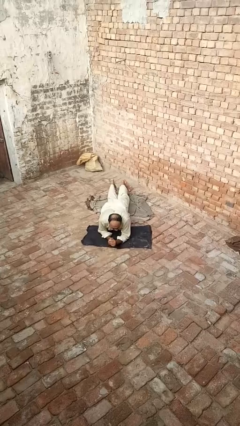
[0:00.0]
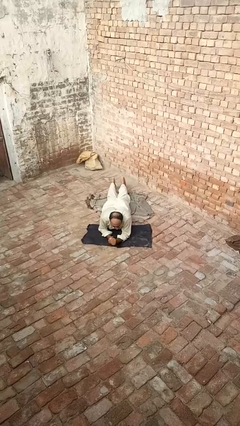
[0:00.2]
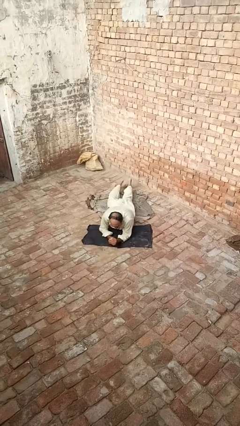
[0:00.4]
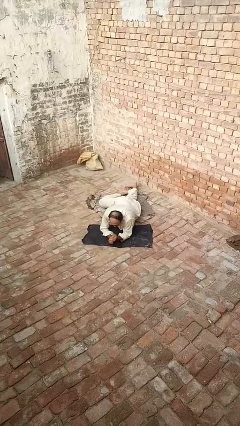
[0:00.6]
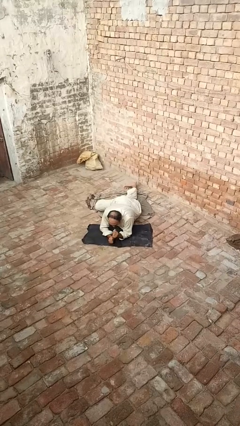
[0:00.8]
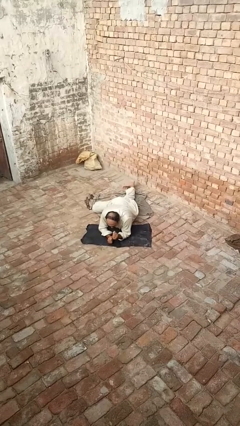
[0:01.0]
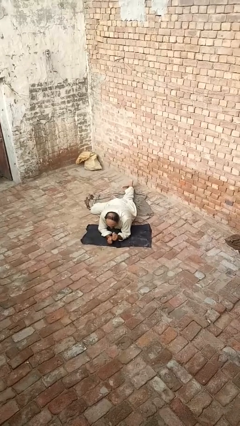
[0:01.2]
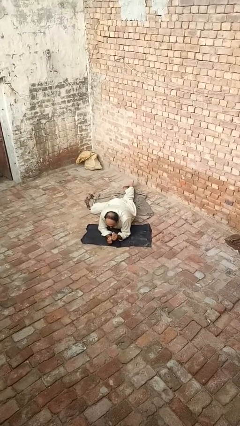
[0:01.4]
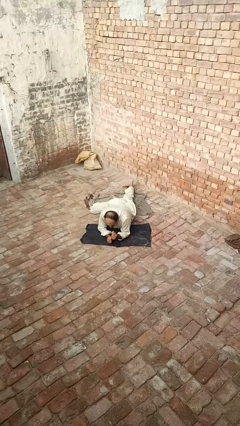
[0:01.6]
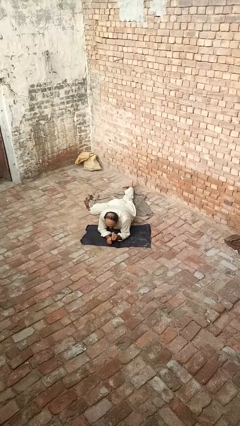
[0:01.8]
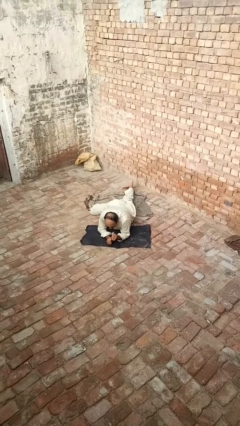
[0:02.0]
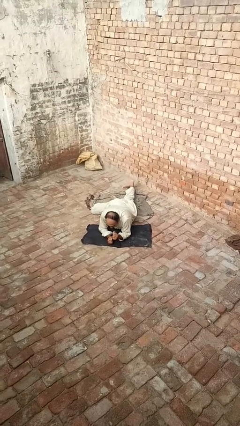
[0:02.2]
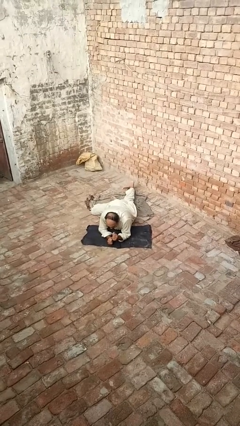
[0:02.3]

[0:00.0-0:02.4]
person crawls

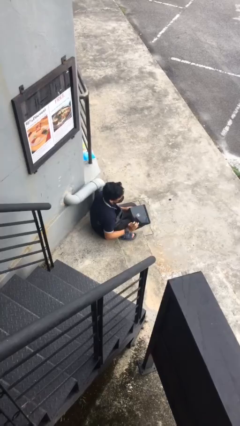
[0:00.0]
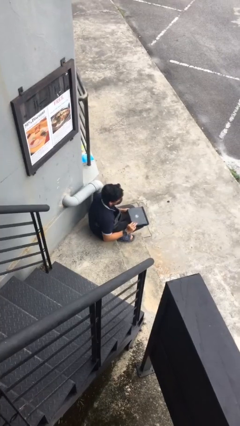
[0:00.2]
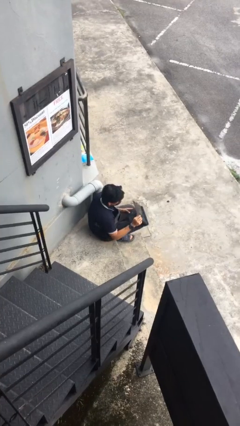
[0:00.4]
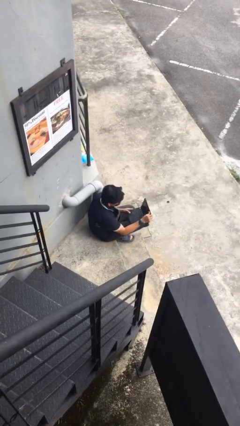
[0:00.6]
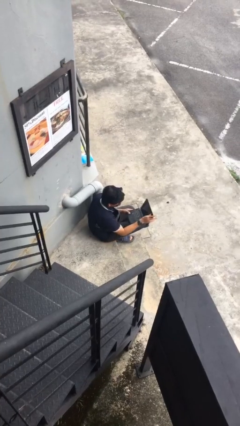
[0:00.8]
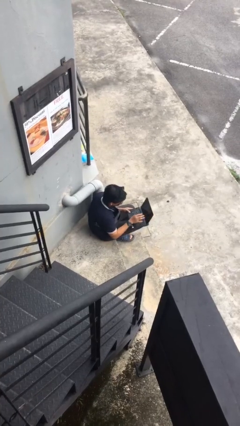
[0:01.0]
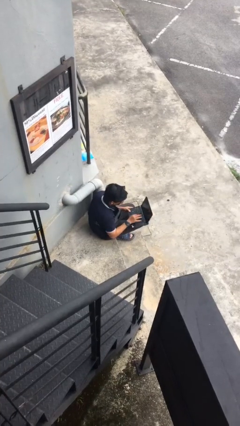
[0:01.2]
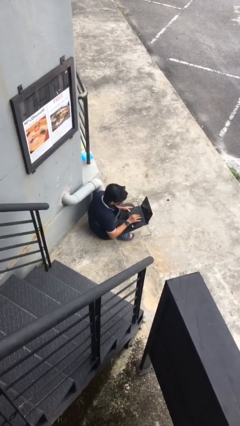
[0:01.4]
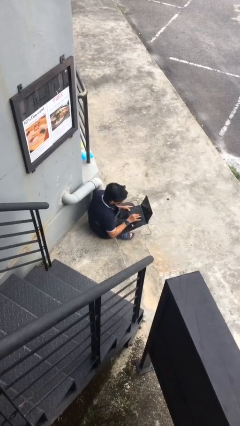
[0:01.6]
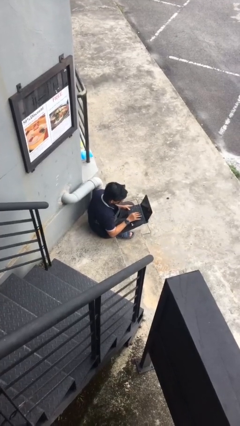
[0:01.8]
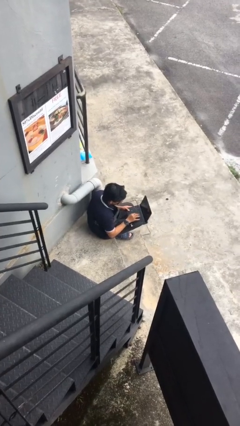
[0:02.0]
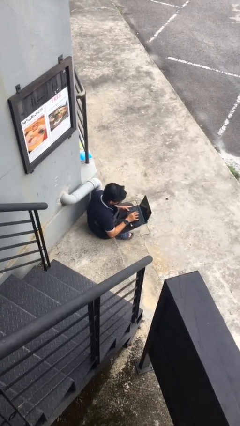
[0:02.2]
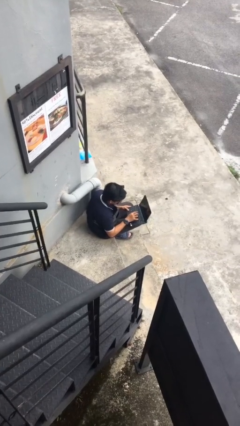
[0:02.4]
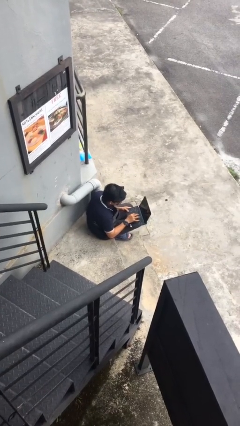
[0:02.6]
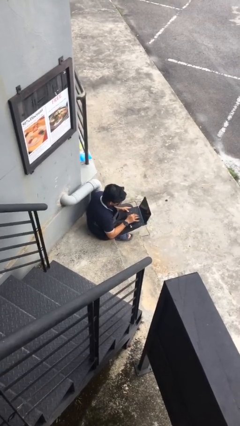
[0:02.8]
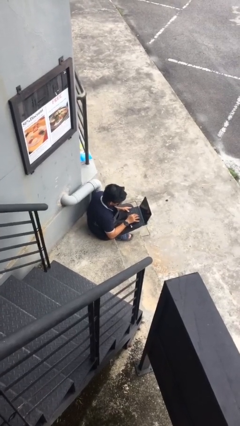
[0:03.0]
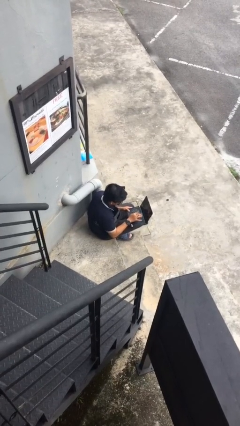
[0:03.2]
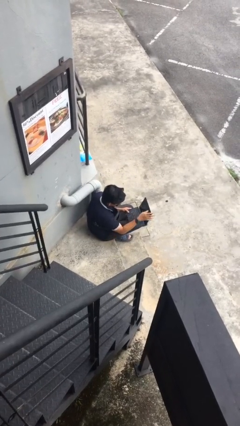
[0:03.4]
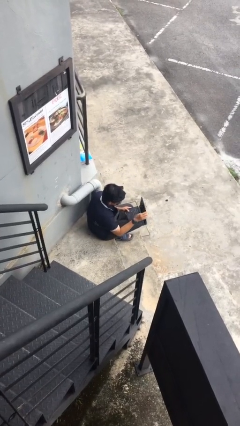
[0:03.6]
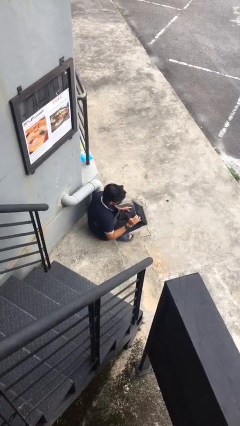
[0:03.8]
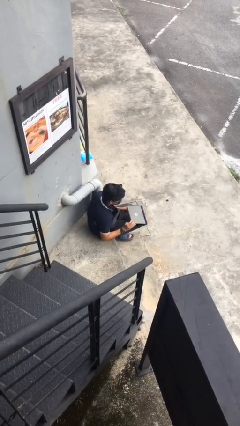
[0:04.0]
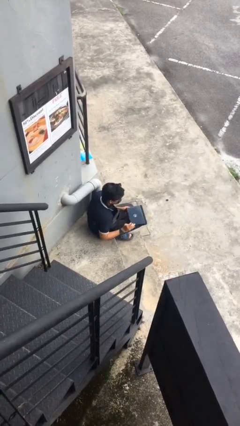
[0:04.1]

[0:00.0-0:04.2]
person interacts with laptop

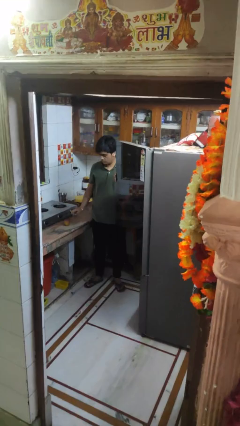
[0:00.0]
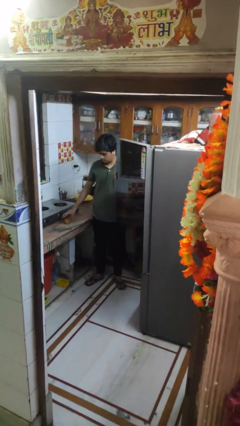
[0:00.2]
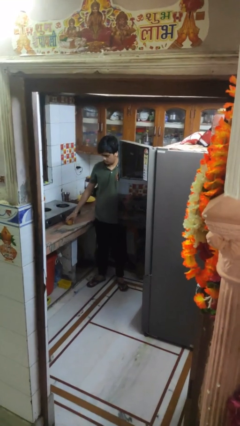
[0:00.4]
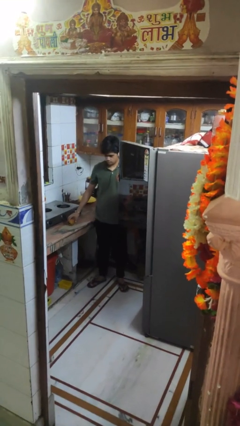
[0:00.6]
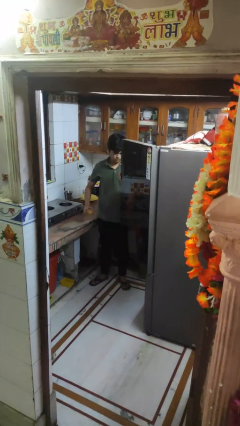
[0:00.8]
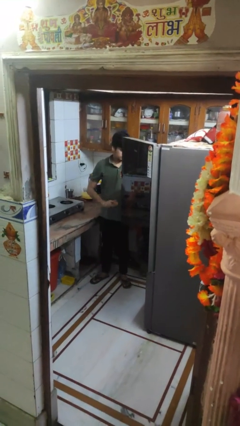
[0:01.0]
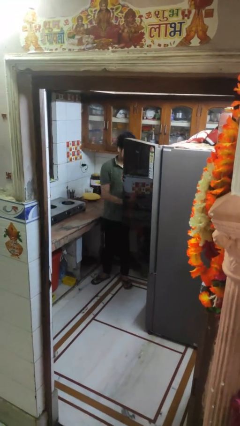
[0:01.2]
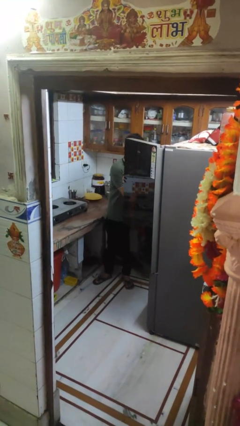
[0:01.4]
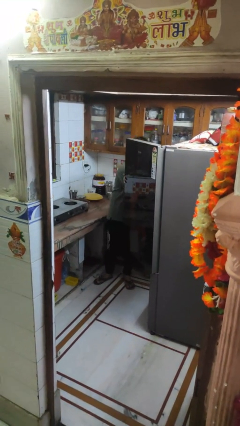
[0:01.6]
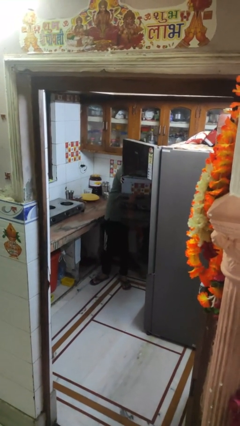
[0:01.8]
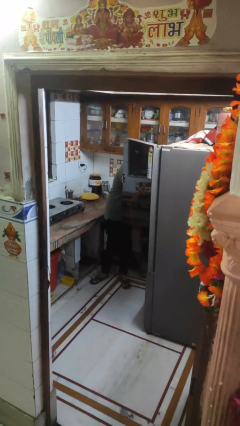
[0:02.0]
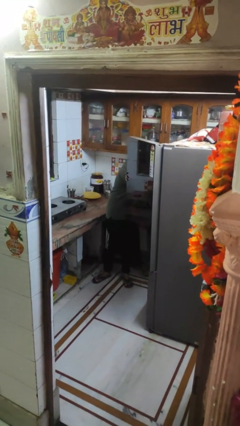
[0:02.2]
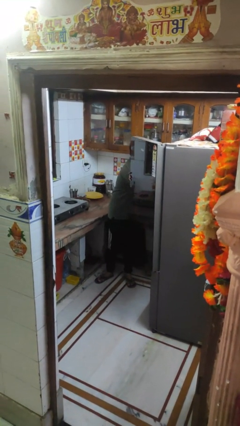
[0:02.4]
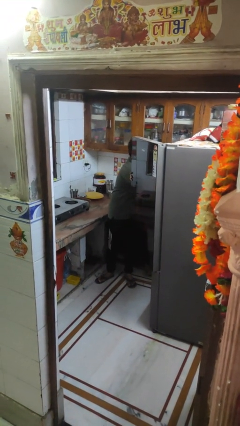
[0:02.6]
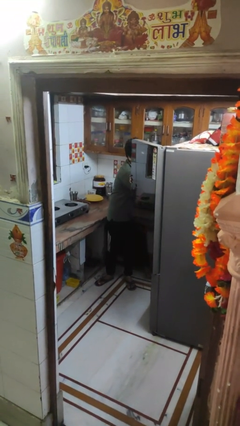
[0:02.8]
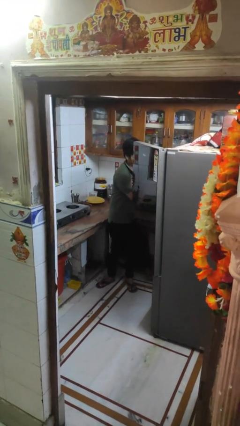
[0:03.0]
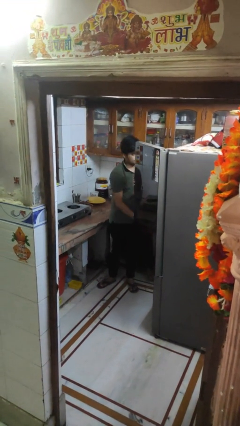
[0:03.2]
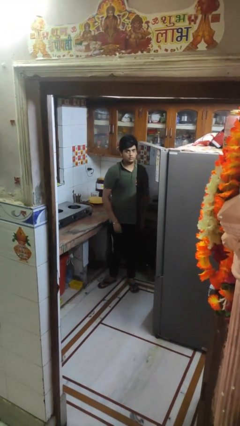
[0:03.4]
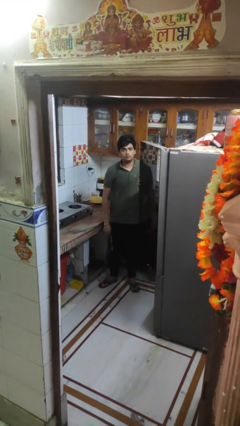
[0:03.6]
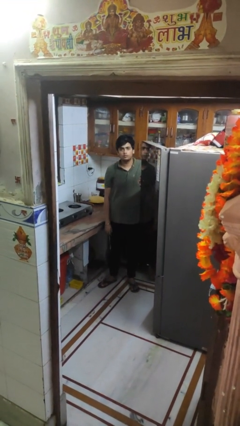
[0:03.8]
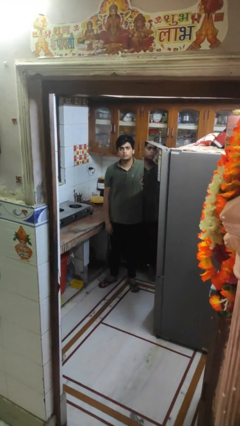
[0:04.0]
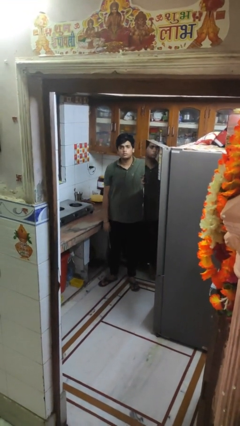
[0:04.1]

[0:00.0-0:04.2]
person puts object into refrigerator

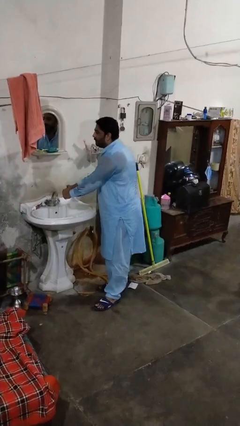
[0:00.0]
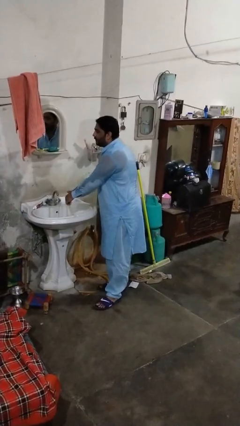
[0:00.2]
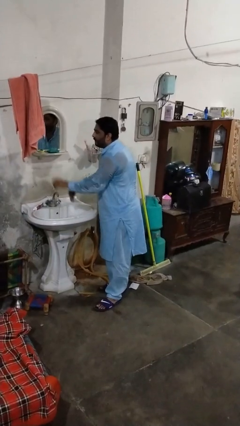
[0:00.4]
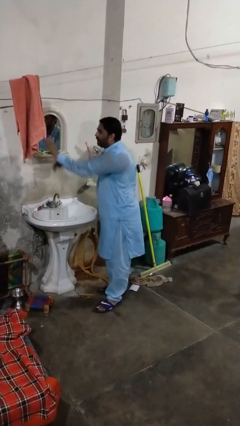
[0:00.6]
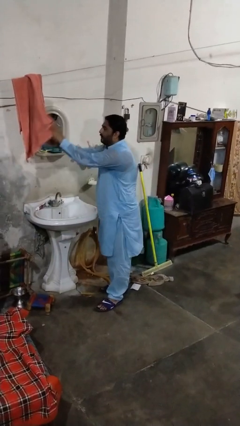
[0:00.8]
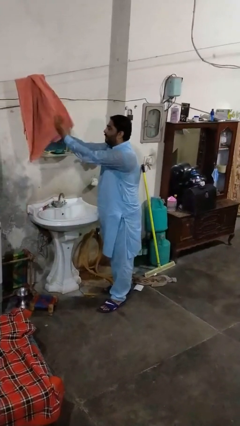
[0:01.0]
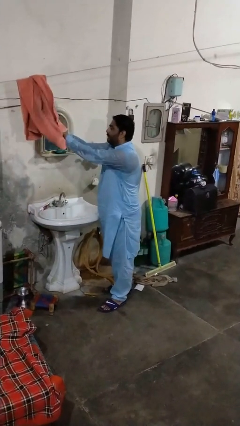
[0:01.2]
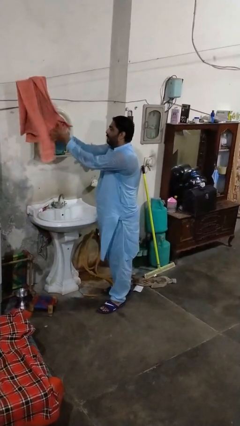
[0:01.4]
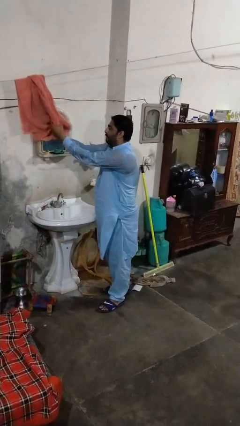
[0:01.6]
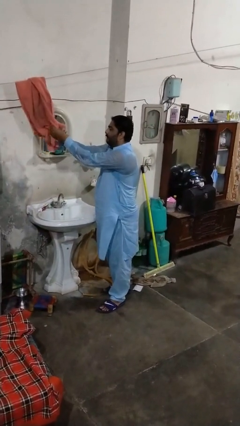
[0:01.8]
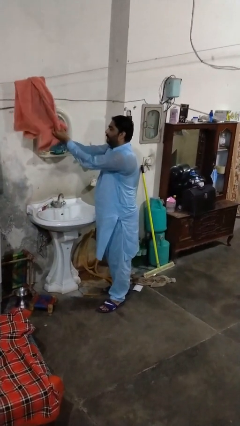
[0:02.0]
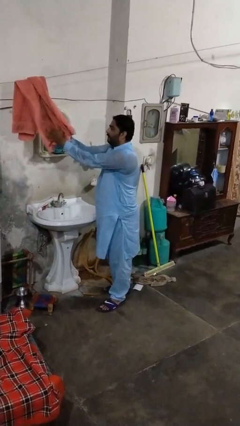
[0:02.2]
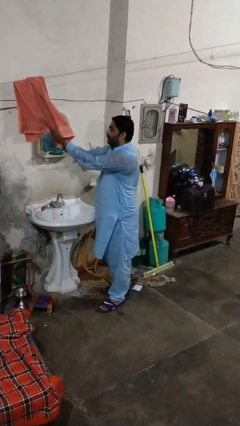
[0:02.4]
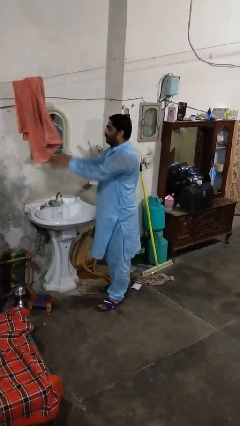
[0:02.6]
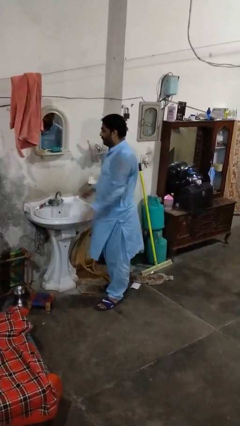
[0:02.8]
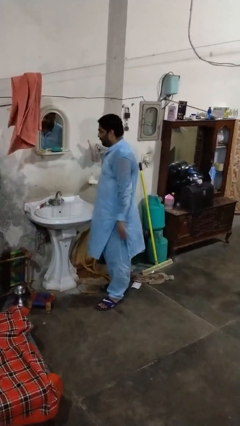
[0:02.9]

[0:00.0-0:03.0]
person dries hands with towel

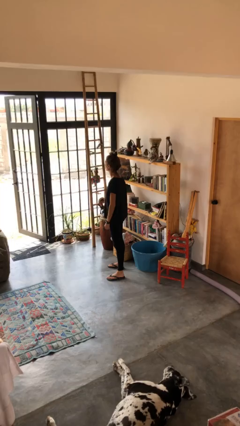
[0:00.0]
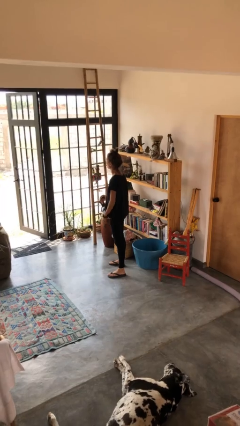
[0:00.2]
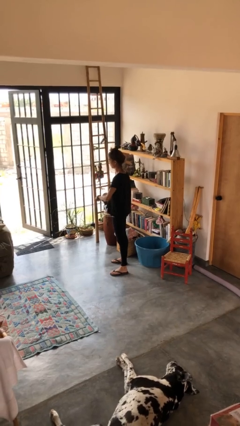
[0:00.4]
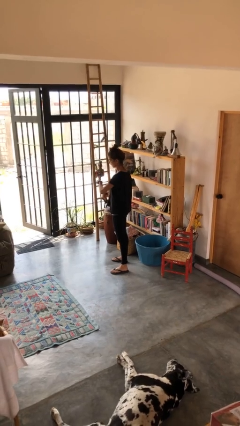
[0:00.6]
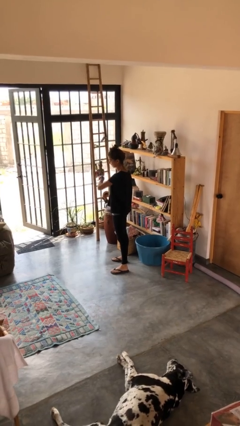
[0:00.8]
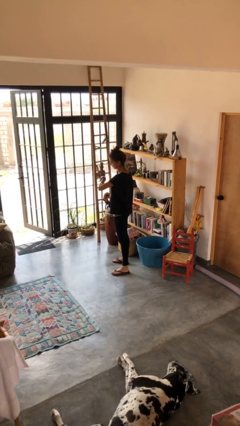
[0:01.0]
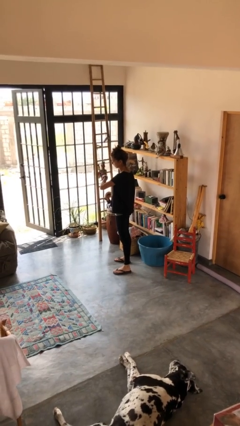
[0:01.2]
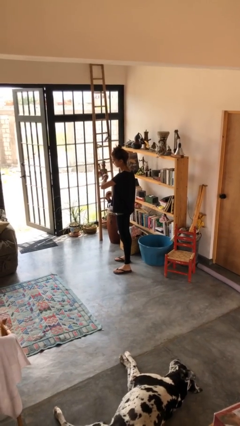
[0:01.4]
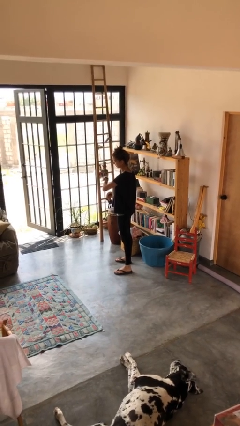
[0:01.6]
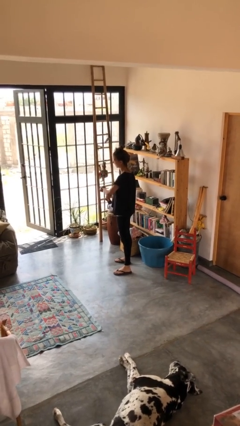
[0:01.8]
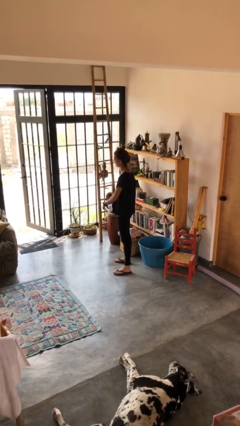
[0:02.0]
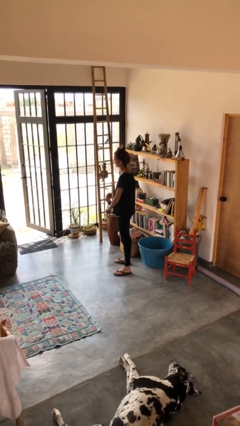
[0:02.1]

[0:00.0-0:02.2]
person looks at wristwatch

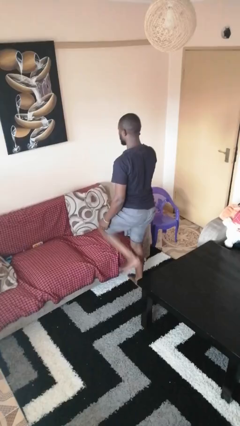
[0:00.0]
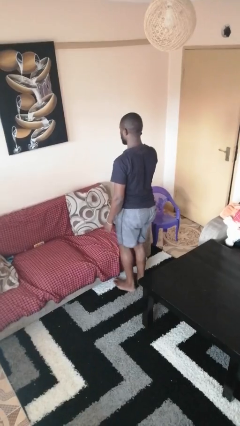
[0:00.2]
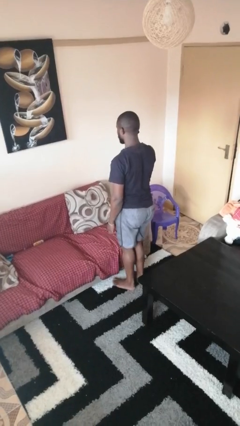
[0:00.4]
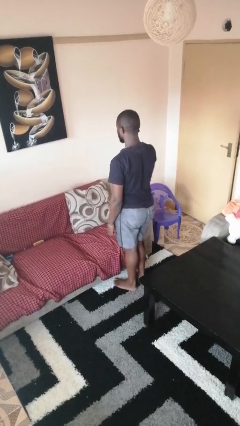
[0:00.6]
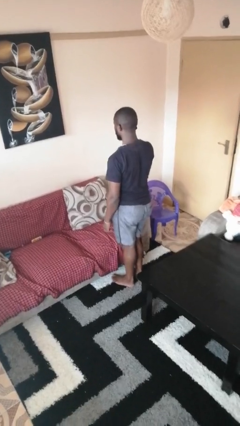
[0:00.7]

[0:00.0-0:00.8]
person climbs off couch

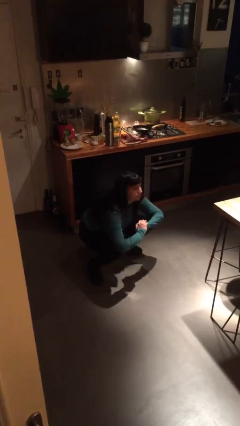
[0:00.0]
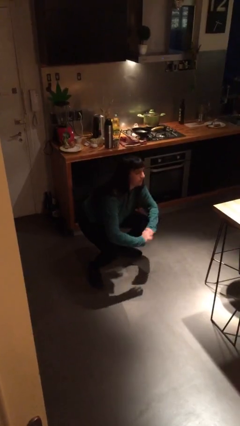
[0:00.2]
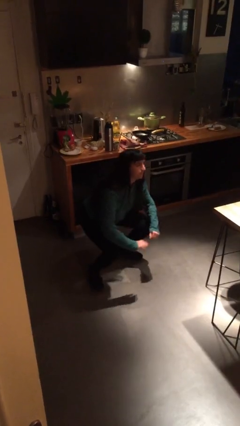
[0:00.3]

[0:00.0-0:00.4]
person stands up
